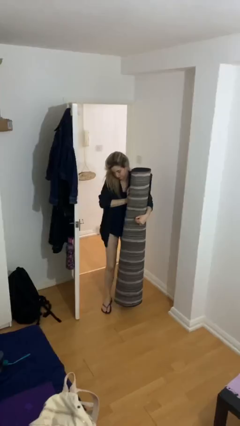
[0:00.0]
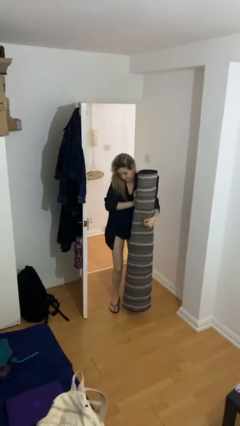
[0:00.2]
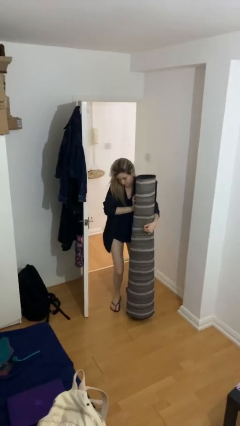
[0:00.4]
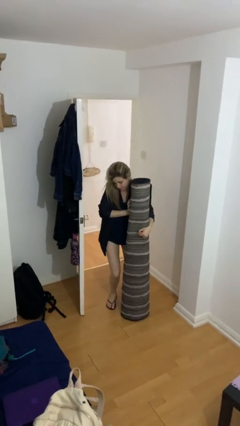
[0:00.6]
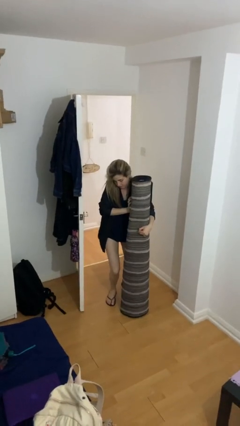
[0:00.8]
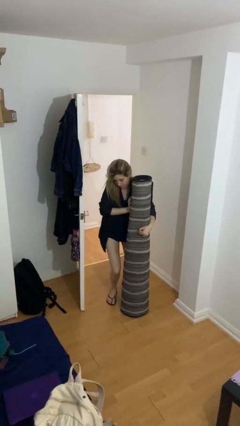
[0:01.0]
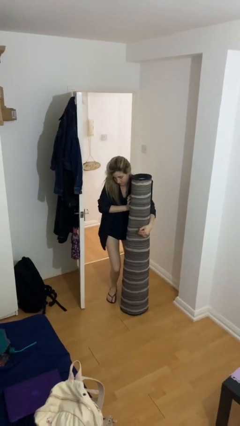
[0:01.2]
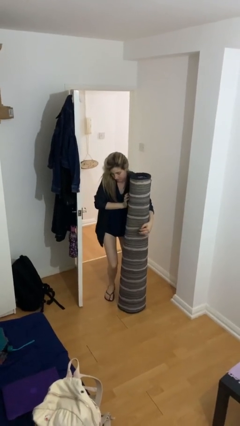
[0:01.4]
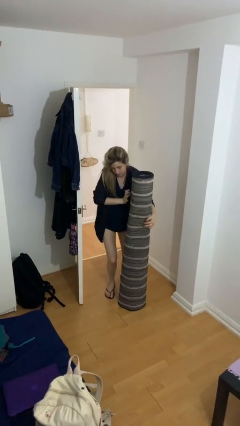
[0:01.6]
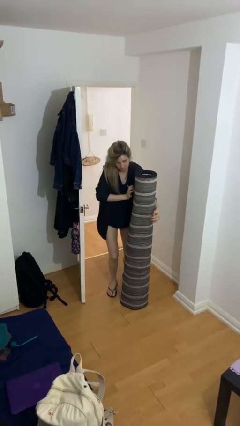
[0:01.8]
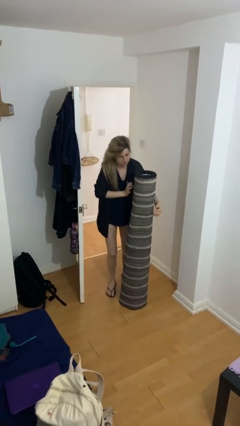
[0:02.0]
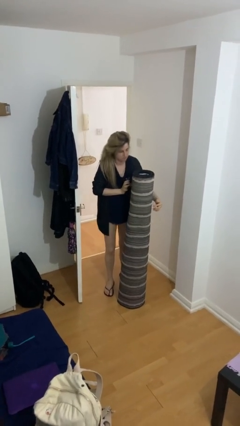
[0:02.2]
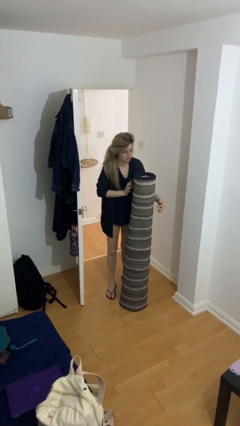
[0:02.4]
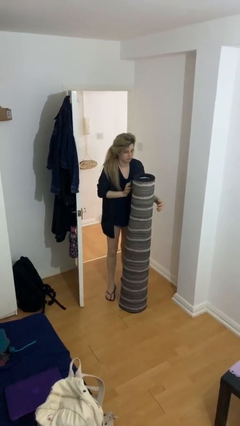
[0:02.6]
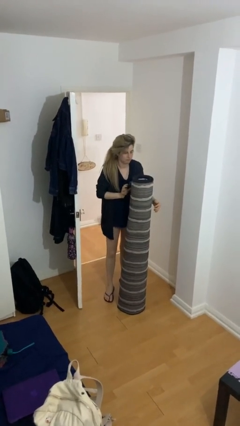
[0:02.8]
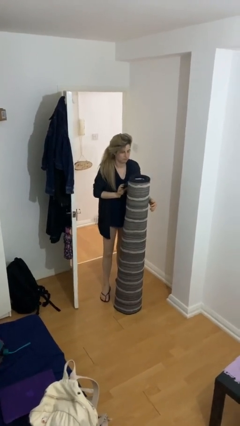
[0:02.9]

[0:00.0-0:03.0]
person puts down object on floor

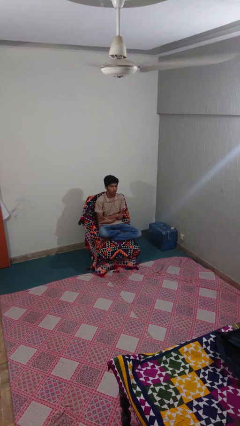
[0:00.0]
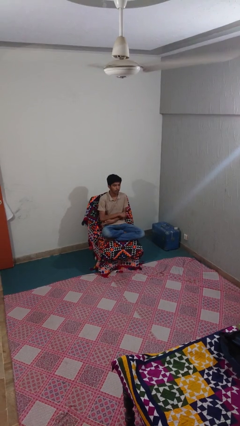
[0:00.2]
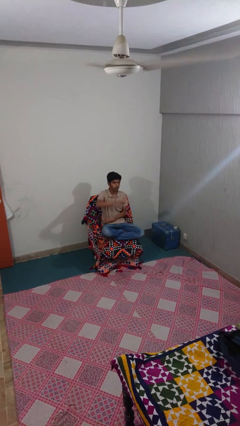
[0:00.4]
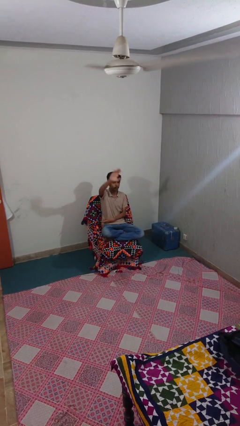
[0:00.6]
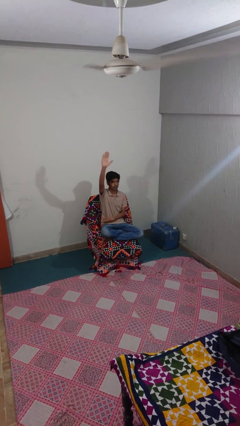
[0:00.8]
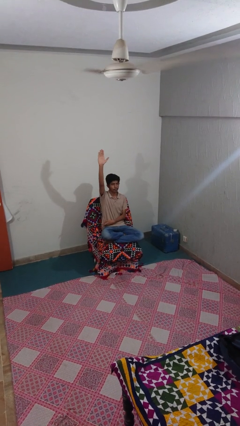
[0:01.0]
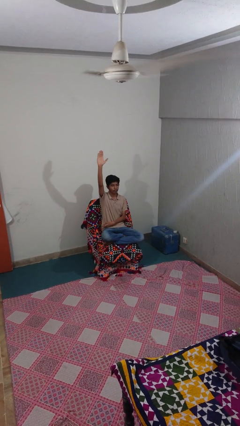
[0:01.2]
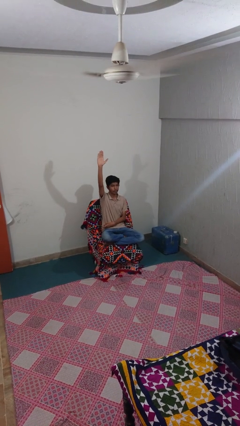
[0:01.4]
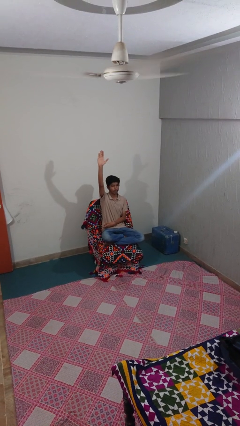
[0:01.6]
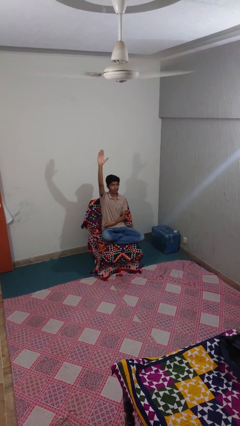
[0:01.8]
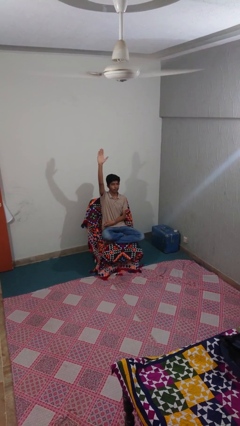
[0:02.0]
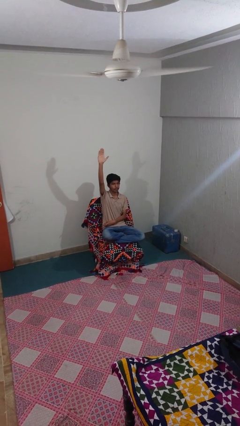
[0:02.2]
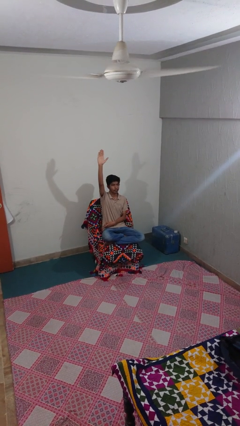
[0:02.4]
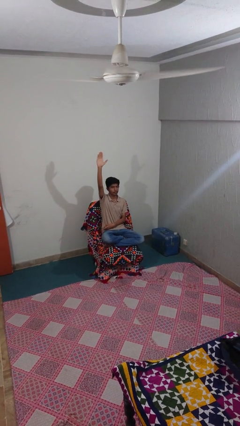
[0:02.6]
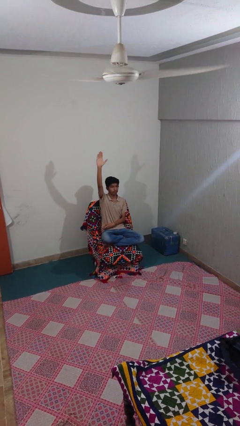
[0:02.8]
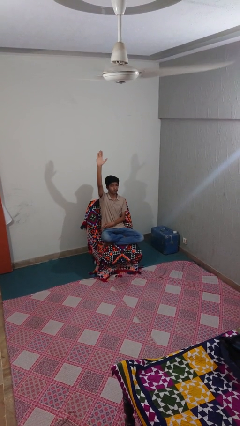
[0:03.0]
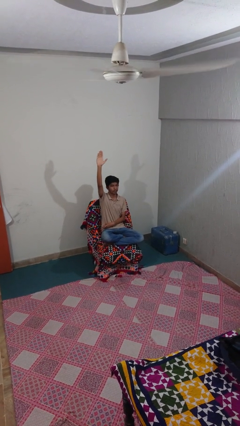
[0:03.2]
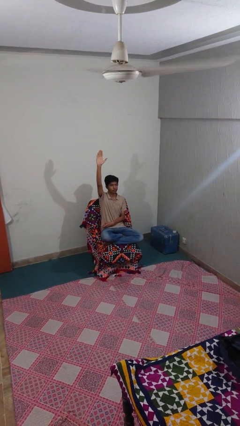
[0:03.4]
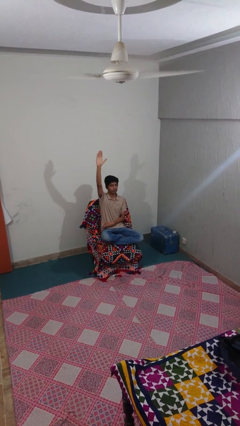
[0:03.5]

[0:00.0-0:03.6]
person gestures raise hand

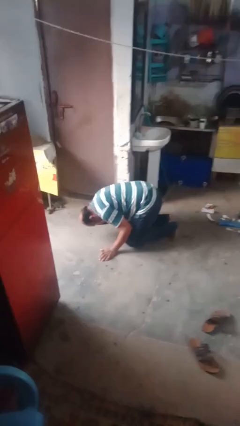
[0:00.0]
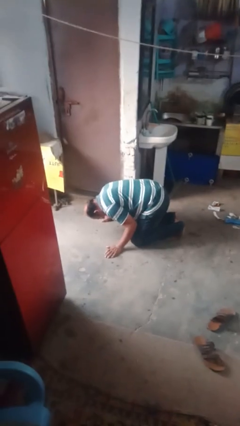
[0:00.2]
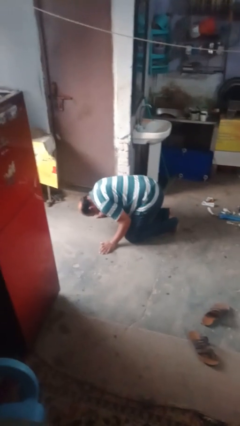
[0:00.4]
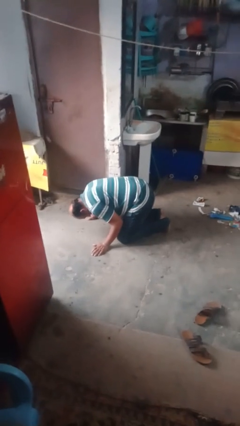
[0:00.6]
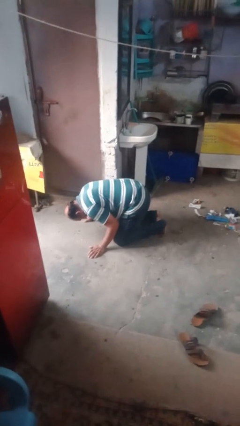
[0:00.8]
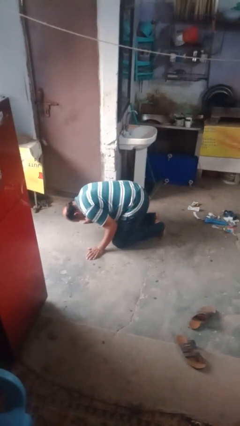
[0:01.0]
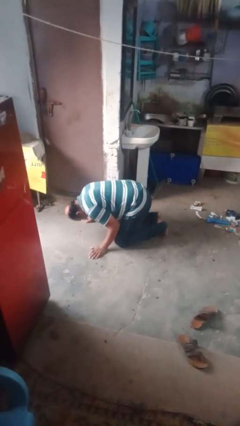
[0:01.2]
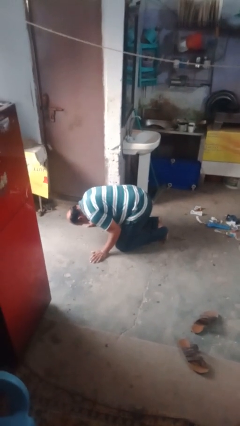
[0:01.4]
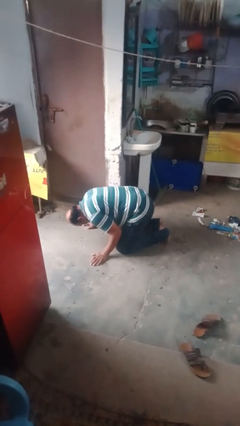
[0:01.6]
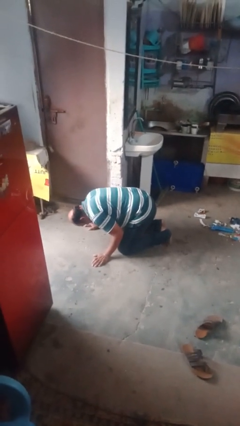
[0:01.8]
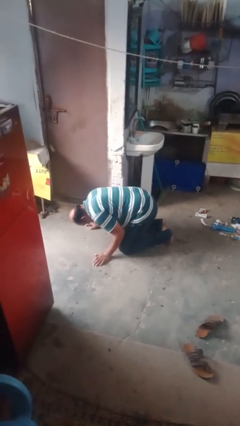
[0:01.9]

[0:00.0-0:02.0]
person lies down on floor

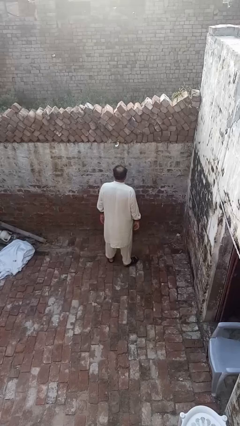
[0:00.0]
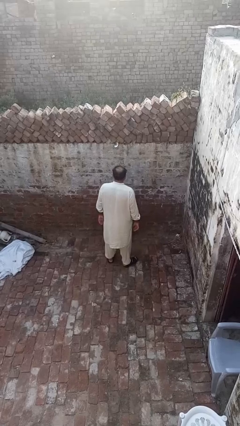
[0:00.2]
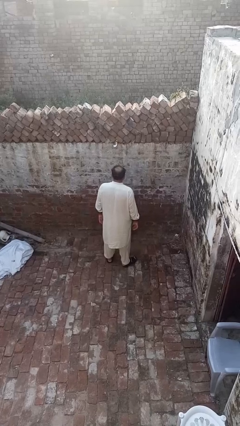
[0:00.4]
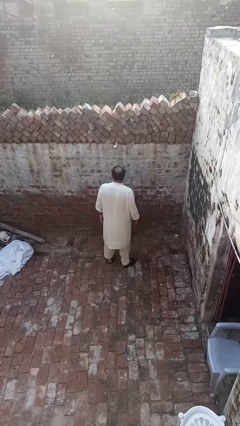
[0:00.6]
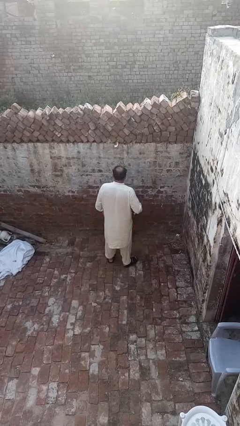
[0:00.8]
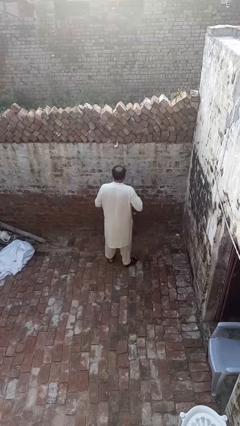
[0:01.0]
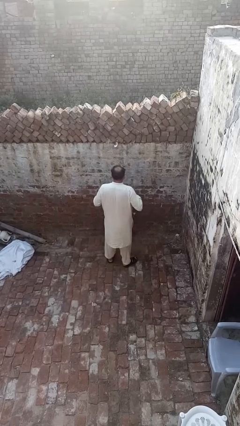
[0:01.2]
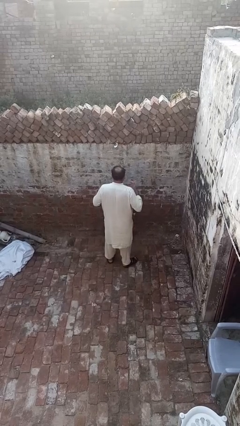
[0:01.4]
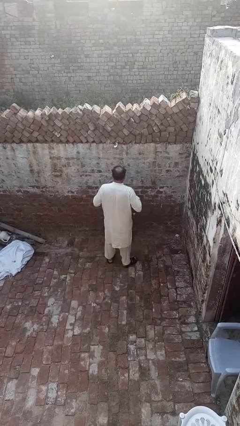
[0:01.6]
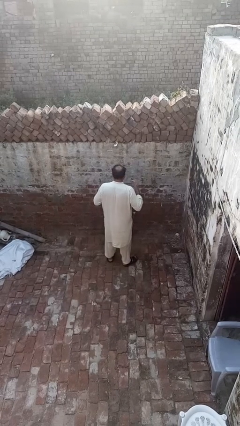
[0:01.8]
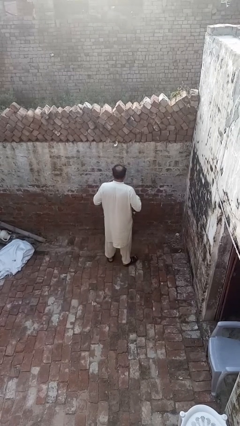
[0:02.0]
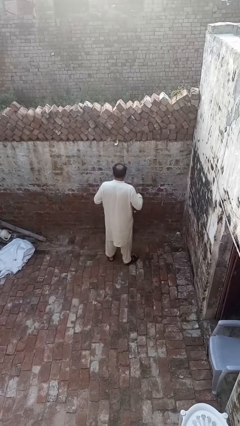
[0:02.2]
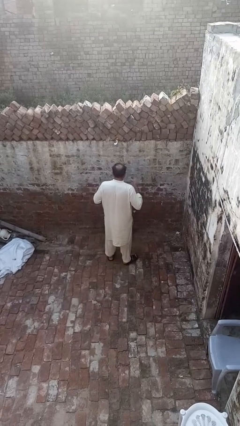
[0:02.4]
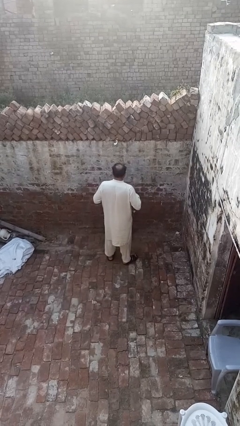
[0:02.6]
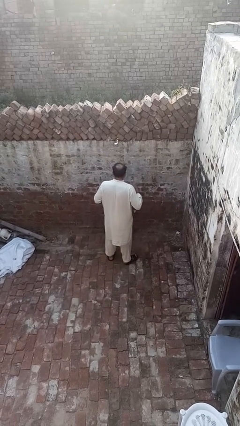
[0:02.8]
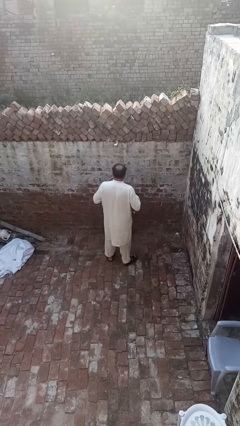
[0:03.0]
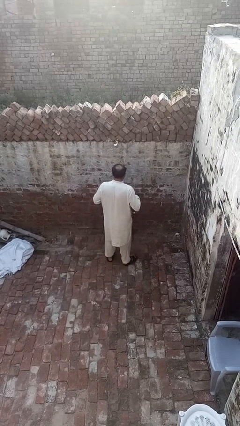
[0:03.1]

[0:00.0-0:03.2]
person drums on chest

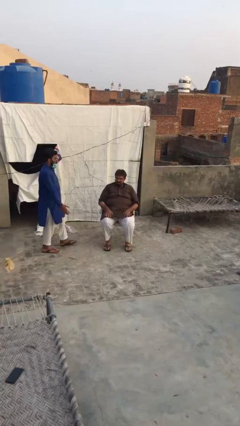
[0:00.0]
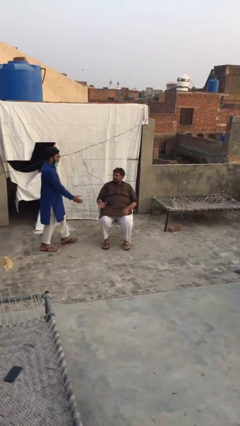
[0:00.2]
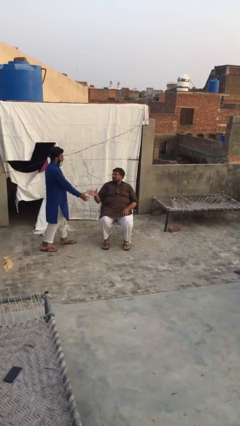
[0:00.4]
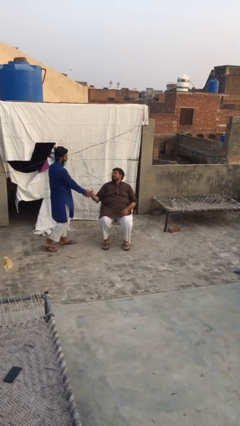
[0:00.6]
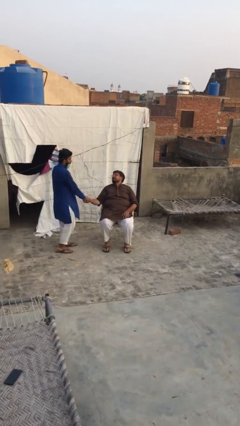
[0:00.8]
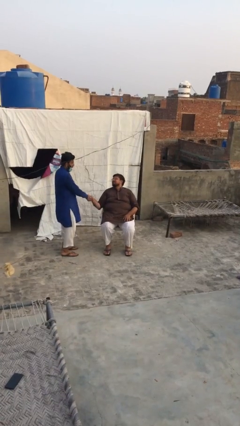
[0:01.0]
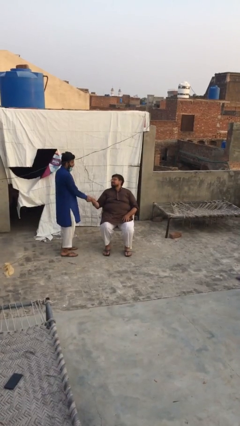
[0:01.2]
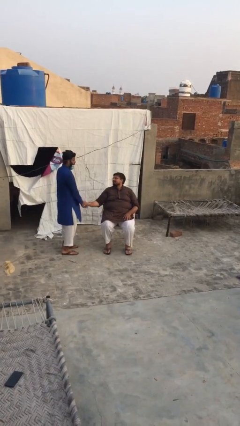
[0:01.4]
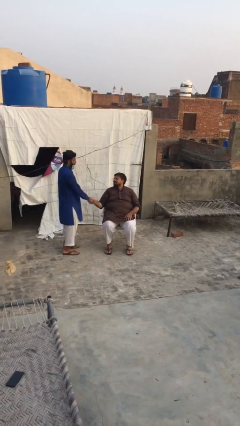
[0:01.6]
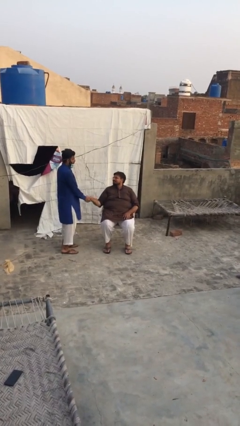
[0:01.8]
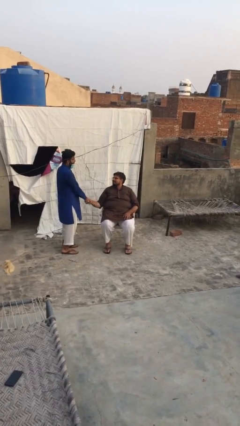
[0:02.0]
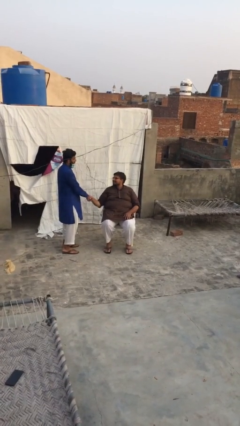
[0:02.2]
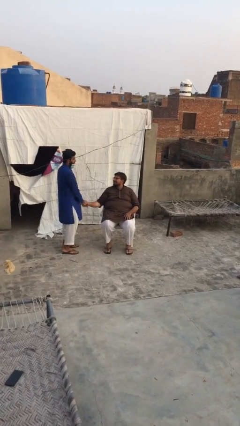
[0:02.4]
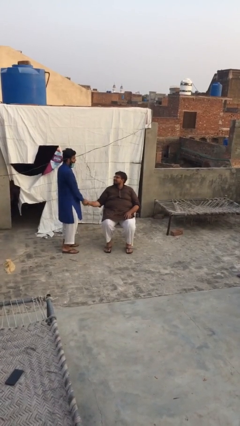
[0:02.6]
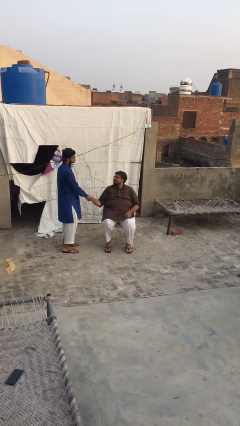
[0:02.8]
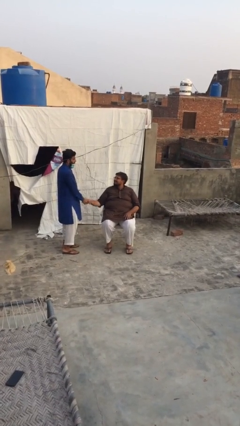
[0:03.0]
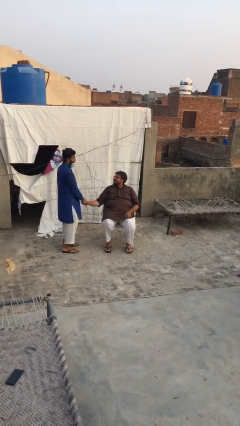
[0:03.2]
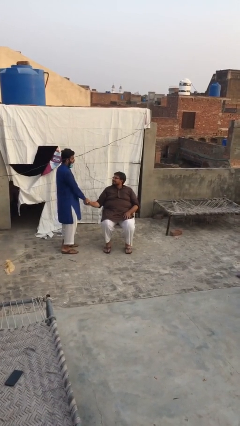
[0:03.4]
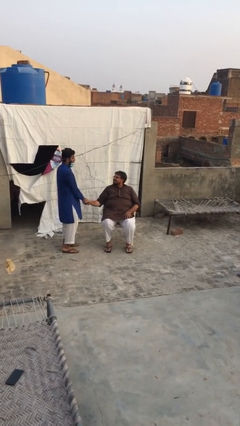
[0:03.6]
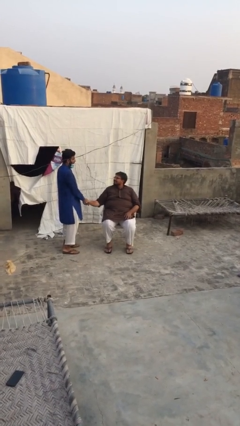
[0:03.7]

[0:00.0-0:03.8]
person shakes hand

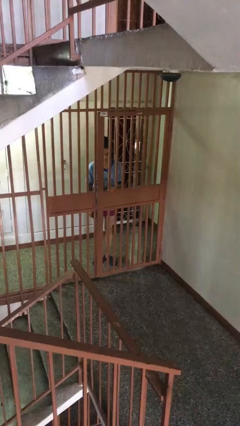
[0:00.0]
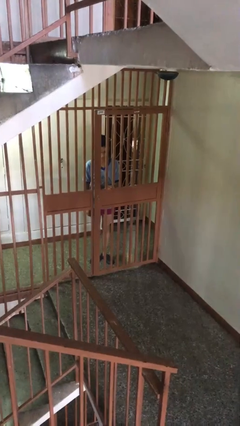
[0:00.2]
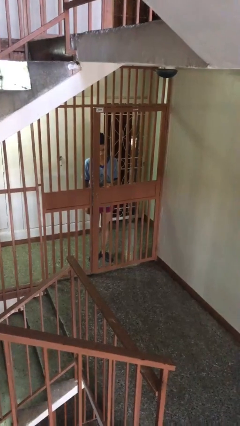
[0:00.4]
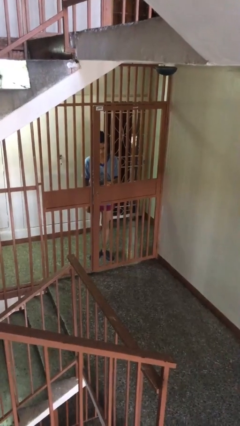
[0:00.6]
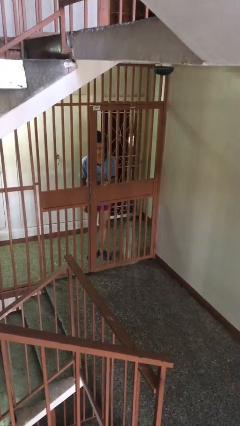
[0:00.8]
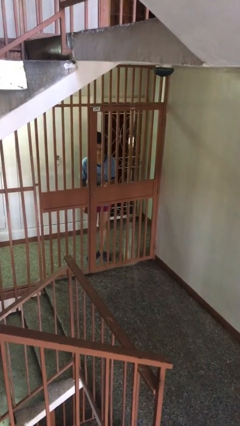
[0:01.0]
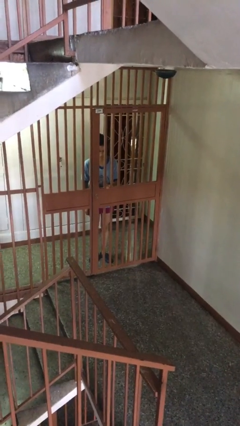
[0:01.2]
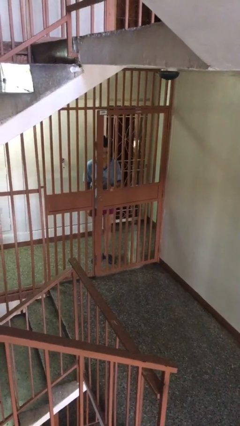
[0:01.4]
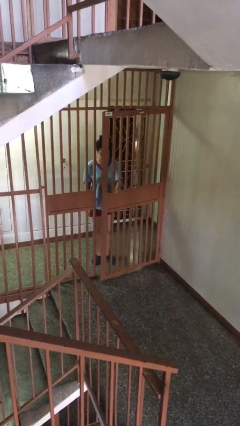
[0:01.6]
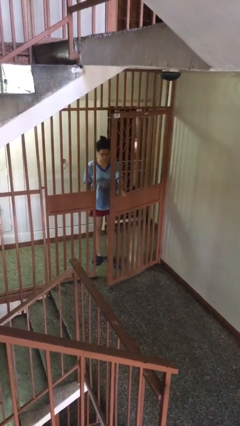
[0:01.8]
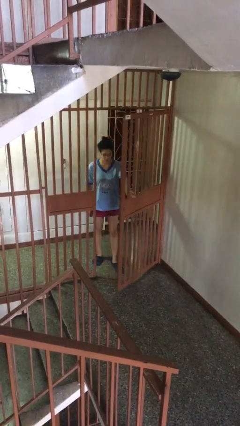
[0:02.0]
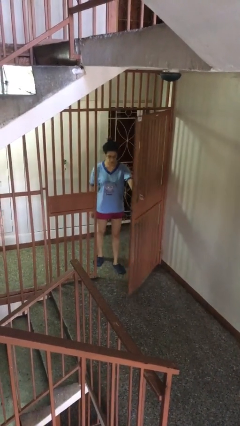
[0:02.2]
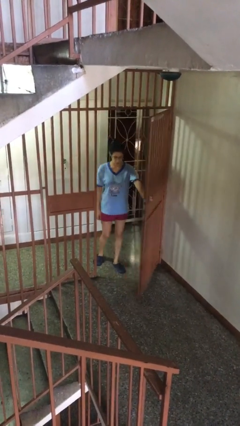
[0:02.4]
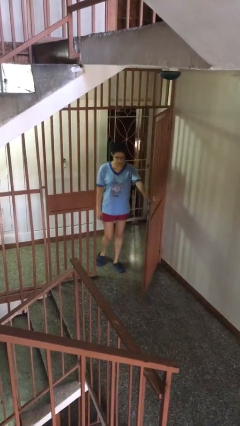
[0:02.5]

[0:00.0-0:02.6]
person opens facility door
